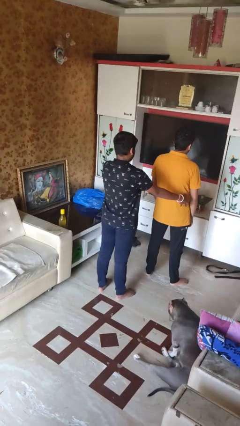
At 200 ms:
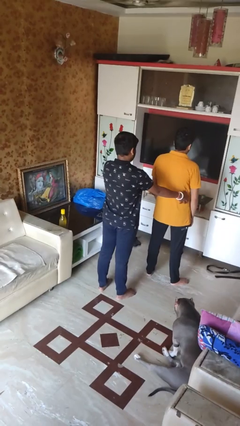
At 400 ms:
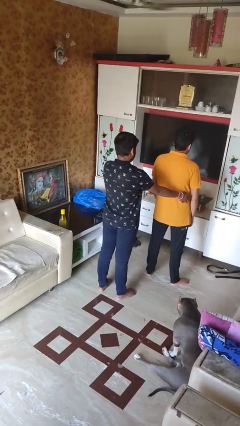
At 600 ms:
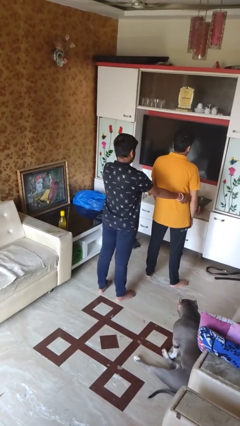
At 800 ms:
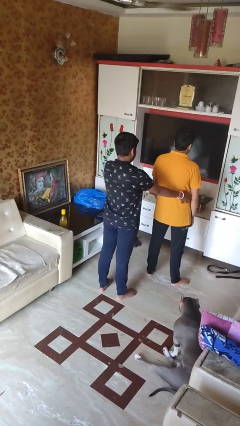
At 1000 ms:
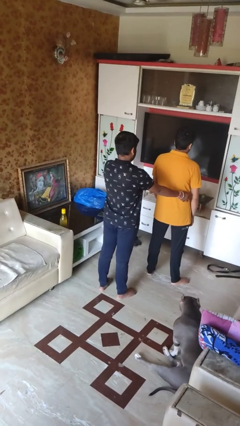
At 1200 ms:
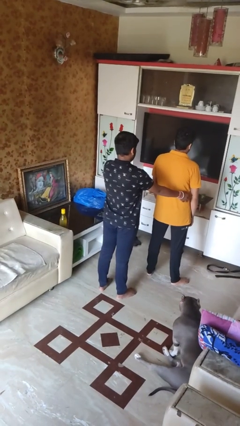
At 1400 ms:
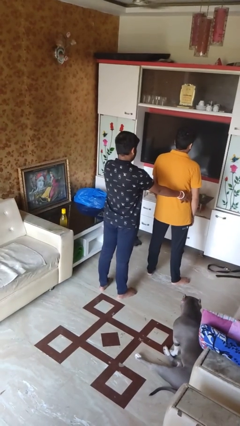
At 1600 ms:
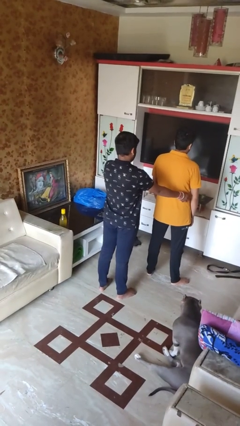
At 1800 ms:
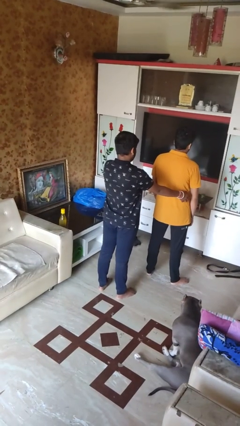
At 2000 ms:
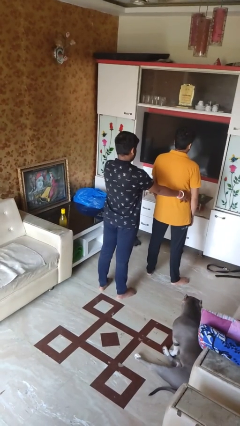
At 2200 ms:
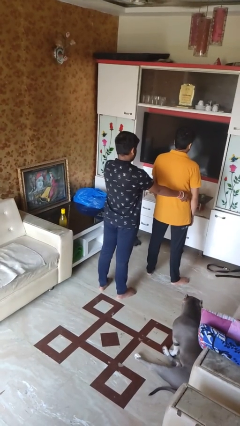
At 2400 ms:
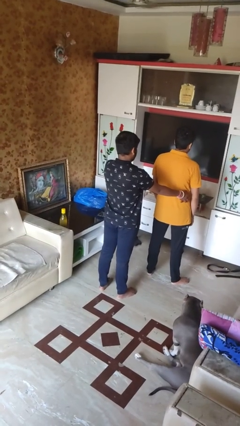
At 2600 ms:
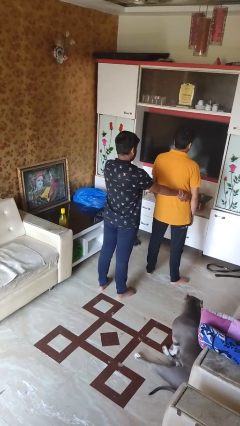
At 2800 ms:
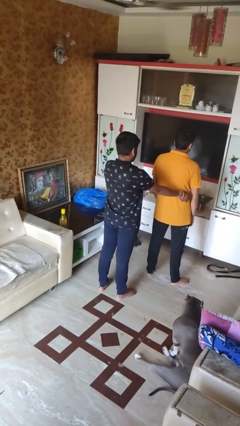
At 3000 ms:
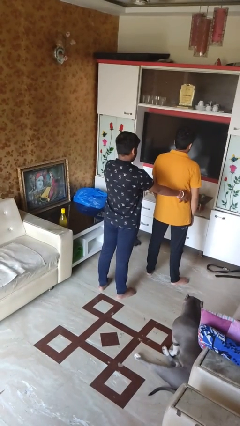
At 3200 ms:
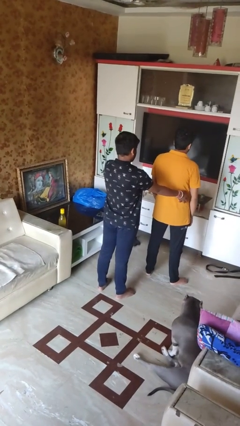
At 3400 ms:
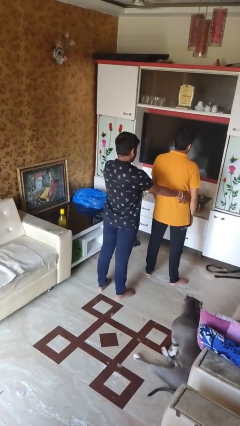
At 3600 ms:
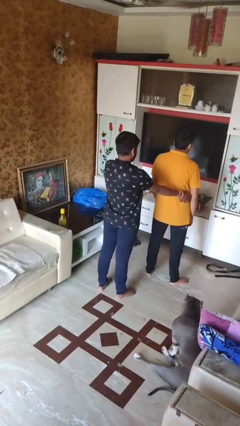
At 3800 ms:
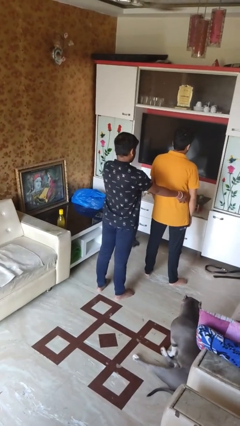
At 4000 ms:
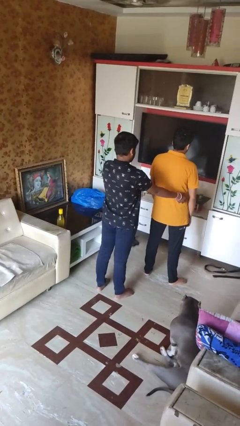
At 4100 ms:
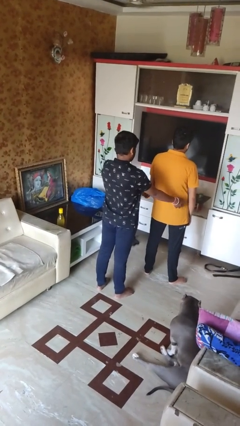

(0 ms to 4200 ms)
person tickles person

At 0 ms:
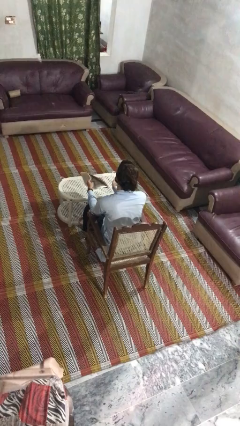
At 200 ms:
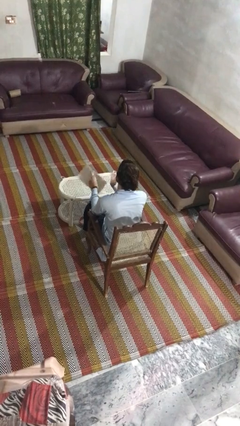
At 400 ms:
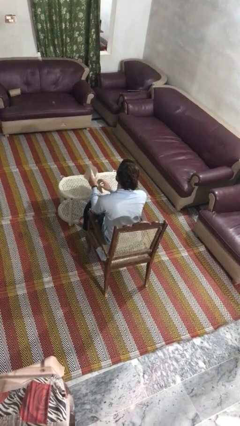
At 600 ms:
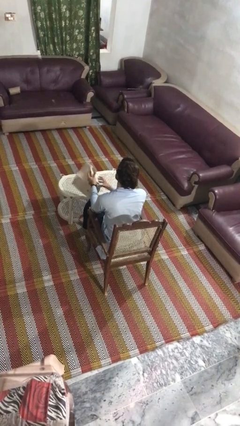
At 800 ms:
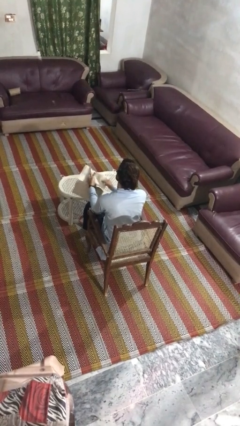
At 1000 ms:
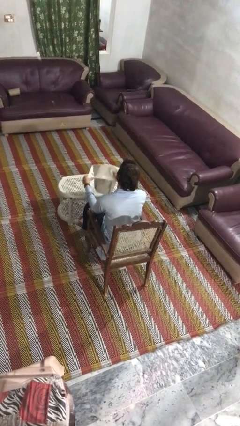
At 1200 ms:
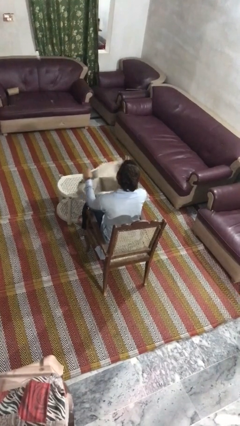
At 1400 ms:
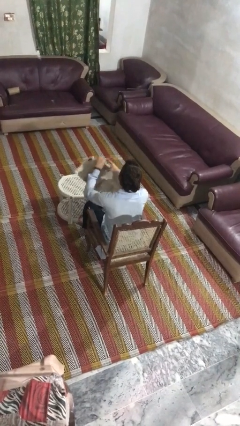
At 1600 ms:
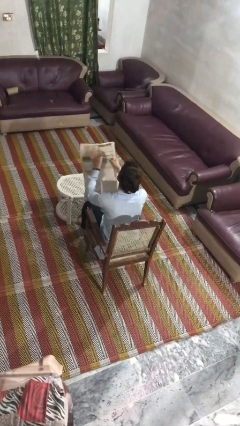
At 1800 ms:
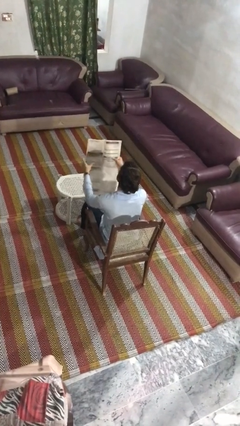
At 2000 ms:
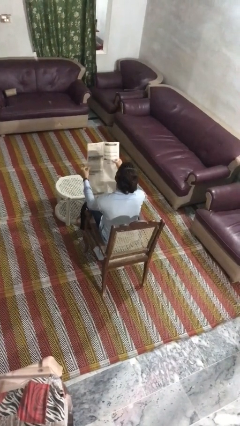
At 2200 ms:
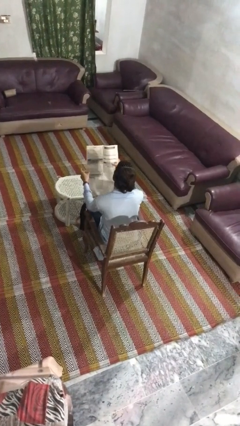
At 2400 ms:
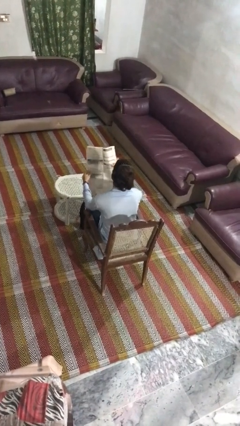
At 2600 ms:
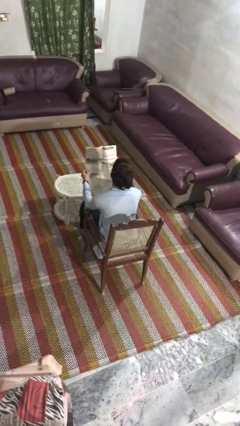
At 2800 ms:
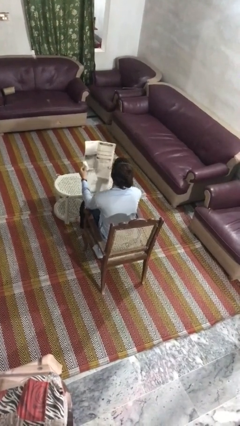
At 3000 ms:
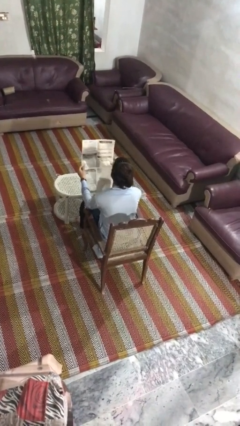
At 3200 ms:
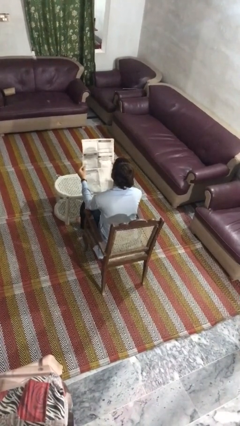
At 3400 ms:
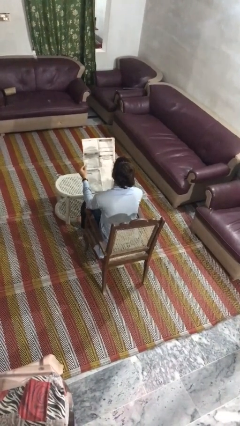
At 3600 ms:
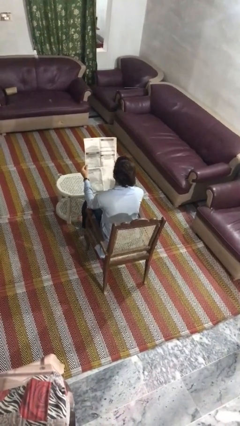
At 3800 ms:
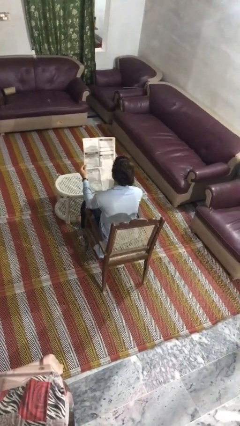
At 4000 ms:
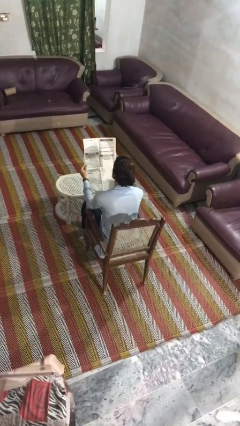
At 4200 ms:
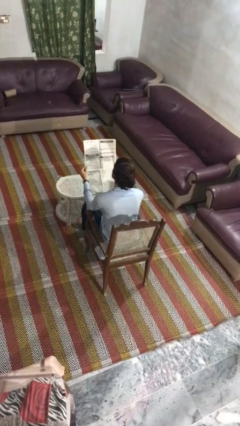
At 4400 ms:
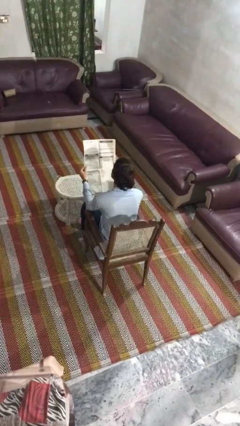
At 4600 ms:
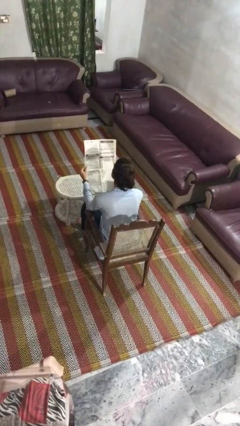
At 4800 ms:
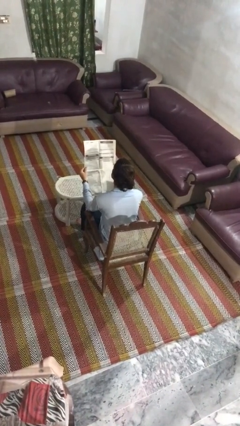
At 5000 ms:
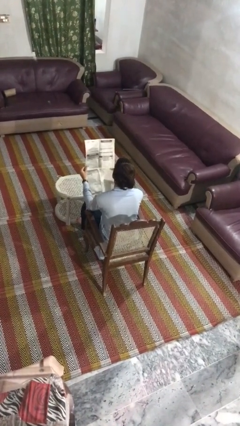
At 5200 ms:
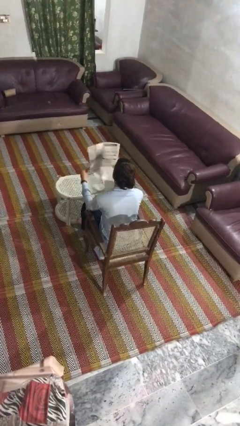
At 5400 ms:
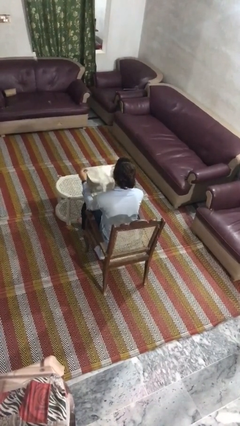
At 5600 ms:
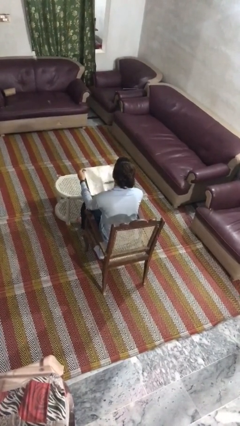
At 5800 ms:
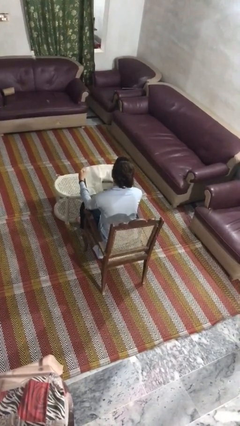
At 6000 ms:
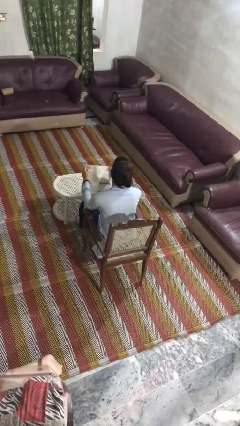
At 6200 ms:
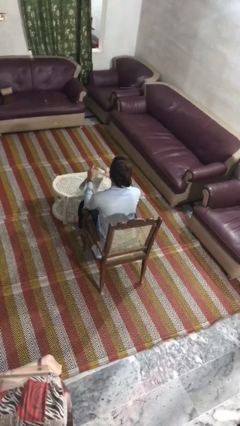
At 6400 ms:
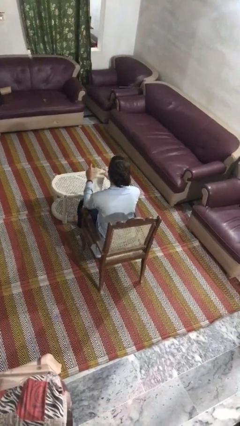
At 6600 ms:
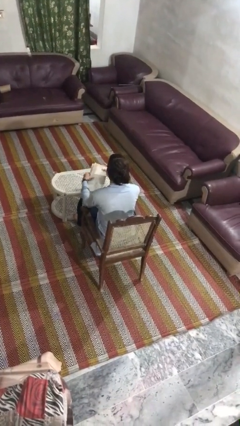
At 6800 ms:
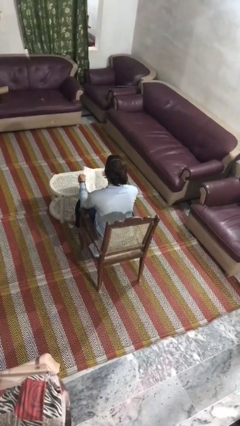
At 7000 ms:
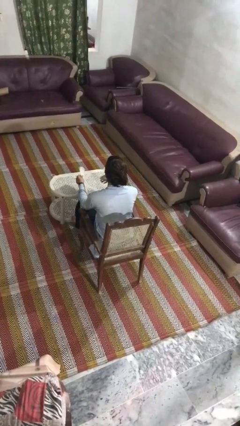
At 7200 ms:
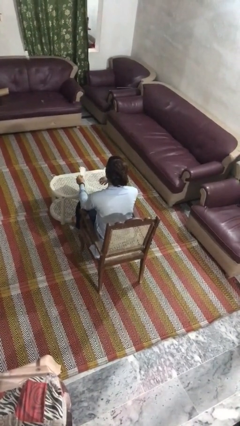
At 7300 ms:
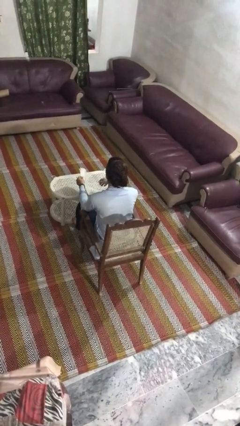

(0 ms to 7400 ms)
person reads newspaper

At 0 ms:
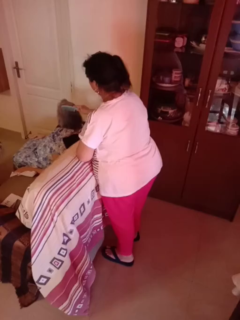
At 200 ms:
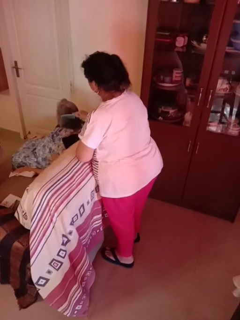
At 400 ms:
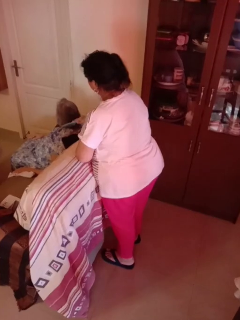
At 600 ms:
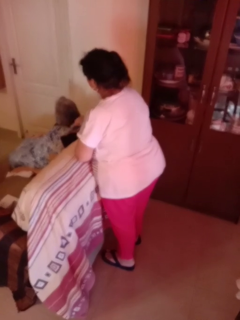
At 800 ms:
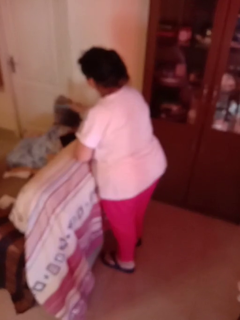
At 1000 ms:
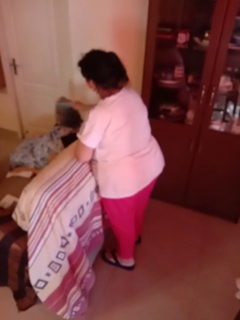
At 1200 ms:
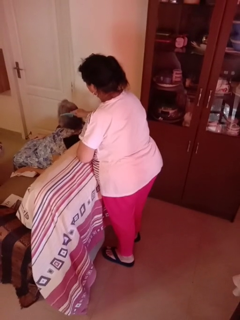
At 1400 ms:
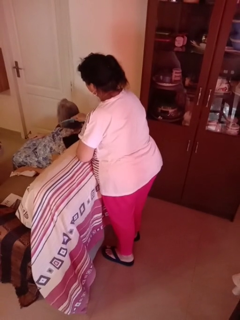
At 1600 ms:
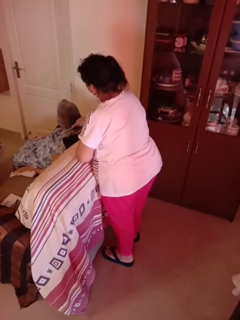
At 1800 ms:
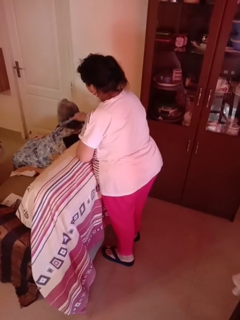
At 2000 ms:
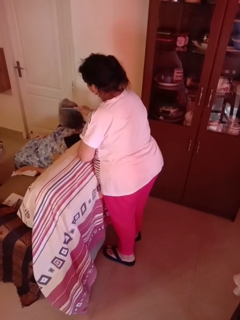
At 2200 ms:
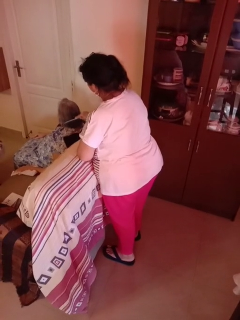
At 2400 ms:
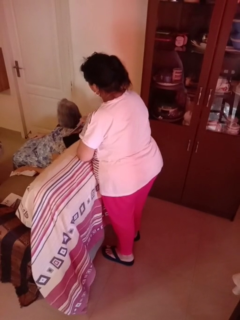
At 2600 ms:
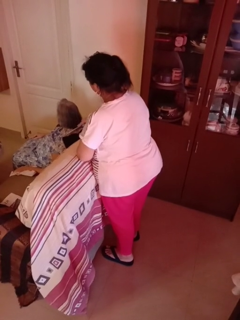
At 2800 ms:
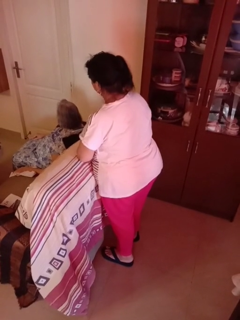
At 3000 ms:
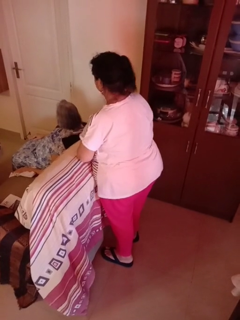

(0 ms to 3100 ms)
person brushes hair of person

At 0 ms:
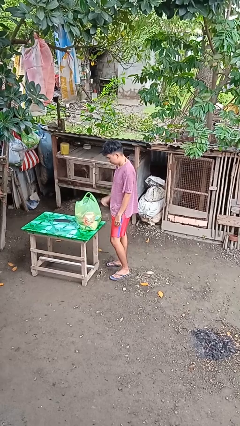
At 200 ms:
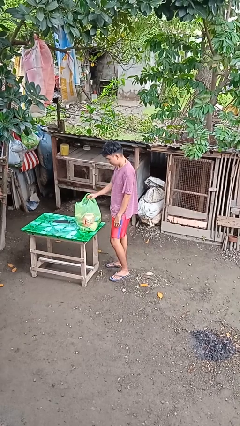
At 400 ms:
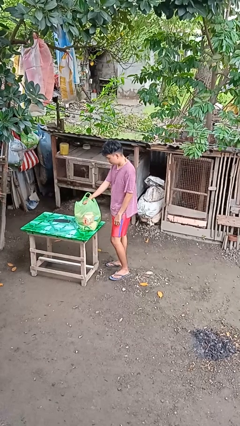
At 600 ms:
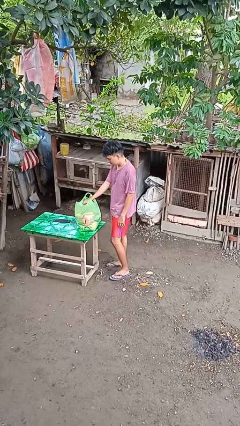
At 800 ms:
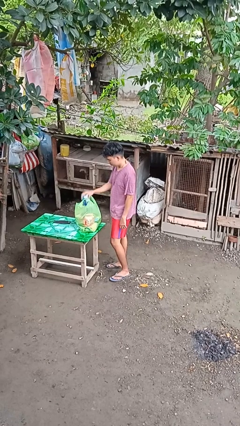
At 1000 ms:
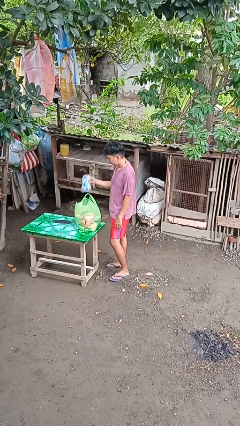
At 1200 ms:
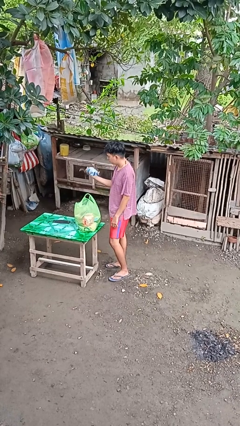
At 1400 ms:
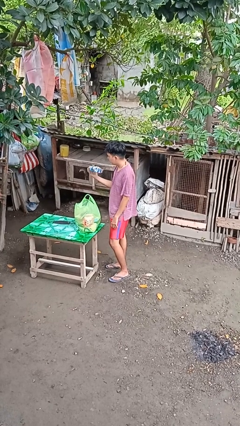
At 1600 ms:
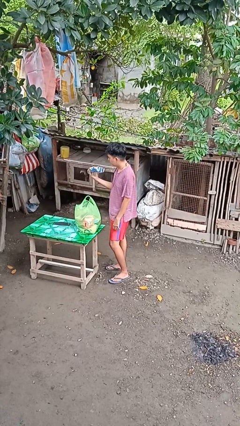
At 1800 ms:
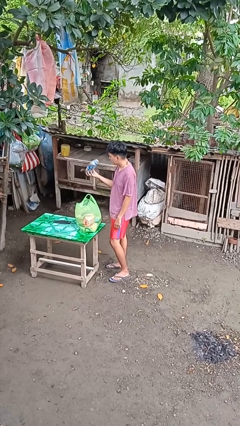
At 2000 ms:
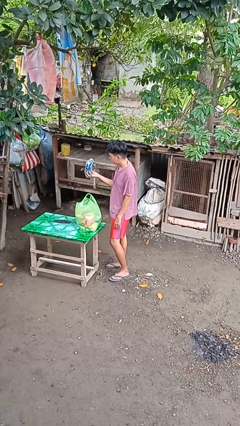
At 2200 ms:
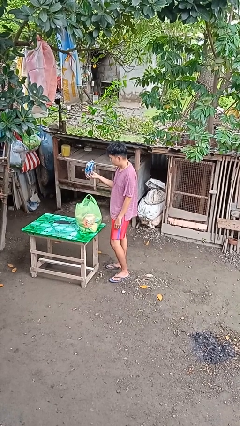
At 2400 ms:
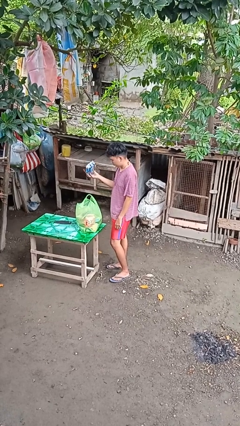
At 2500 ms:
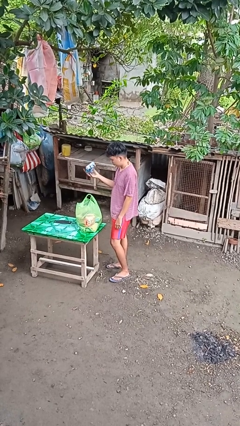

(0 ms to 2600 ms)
person takes object from bag

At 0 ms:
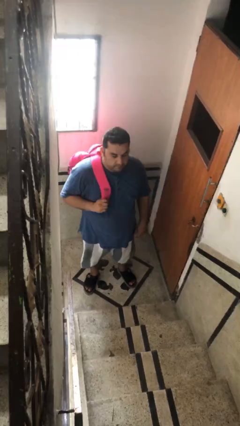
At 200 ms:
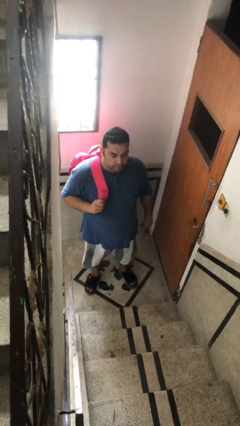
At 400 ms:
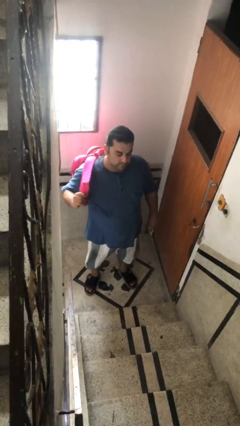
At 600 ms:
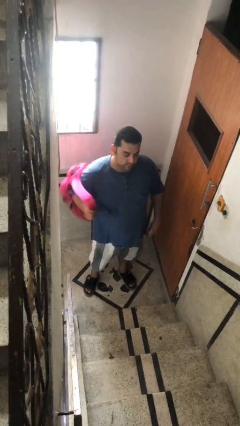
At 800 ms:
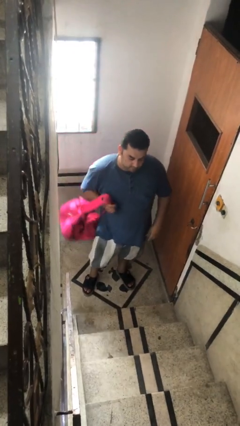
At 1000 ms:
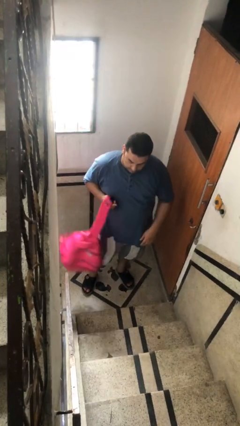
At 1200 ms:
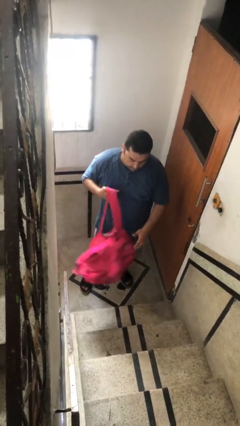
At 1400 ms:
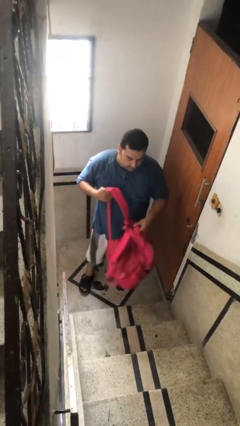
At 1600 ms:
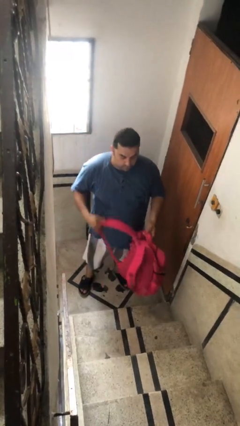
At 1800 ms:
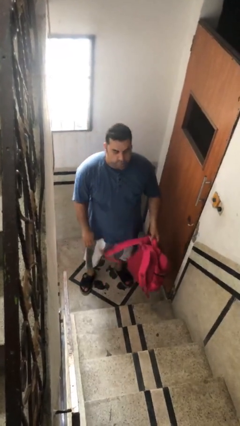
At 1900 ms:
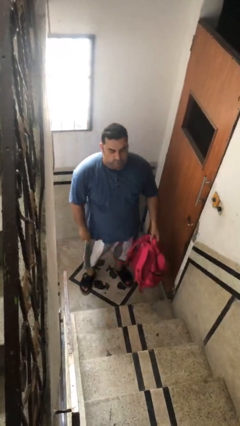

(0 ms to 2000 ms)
person takes off backpack
